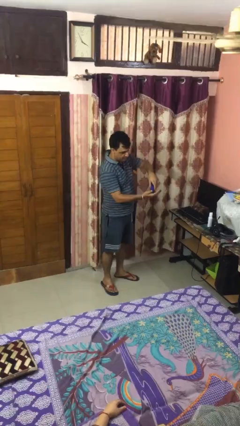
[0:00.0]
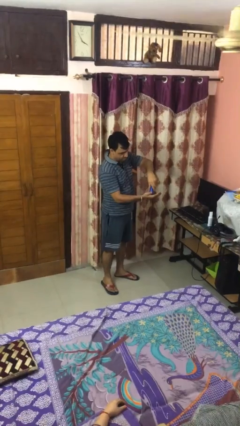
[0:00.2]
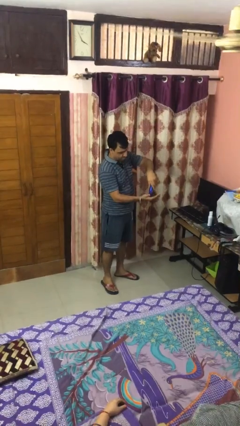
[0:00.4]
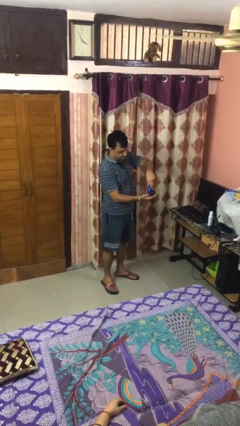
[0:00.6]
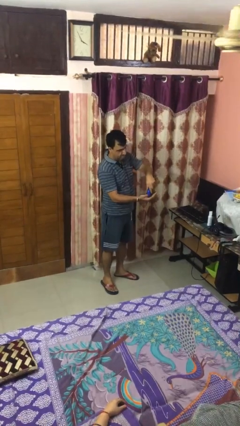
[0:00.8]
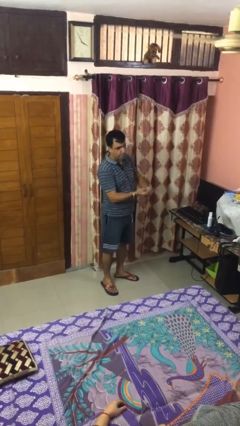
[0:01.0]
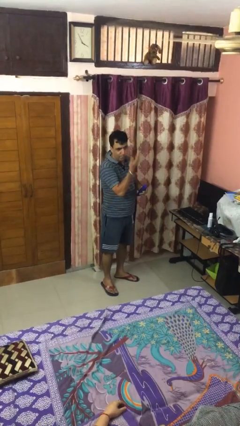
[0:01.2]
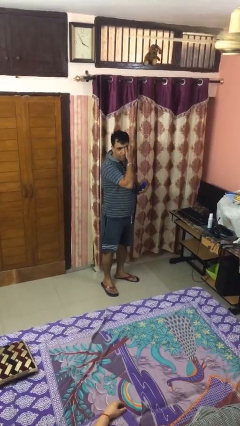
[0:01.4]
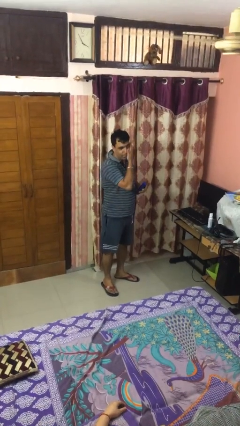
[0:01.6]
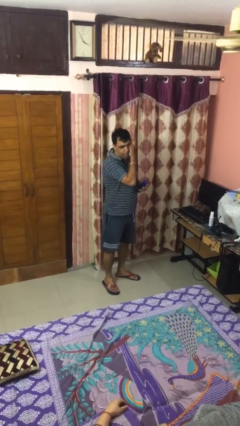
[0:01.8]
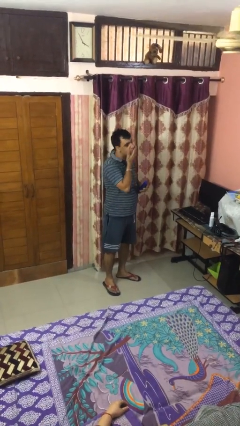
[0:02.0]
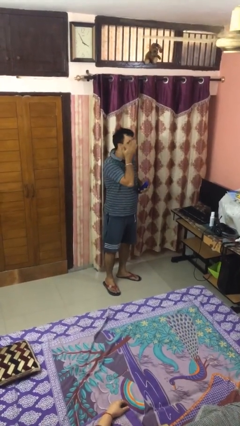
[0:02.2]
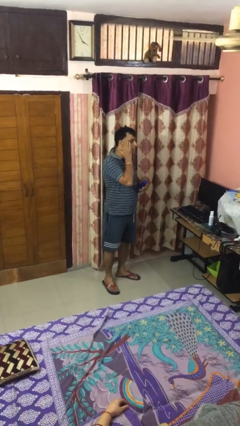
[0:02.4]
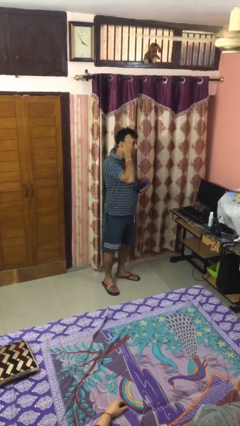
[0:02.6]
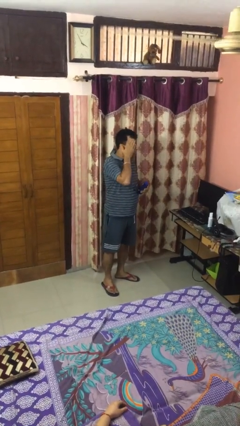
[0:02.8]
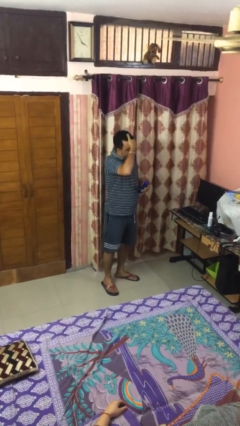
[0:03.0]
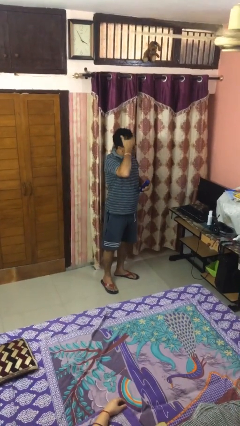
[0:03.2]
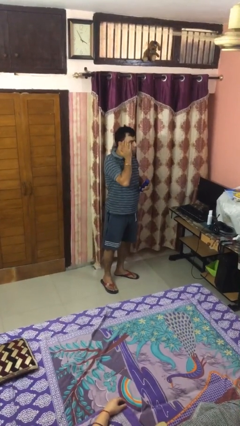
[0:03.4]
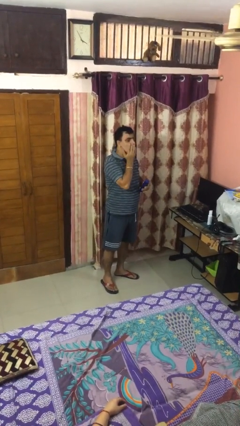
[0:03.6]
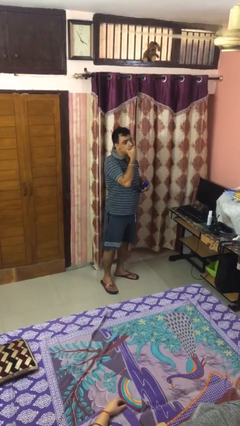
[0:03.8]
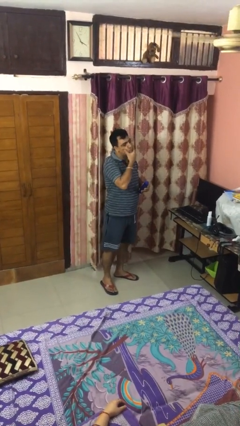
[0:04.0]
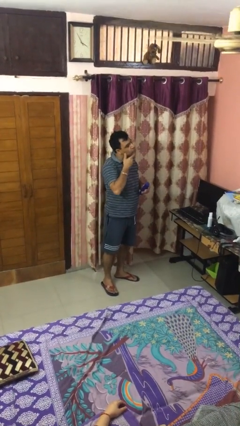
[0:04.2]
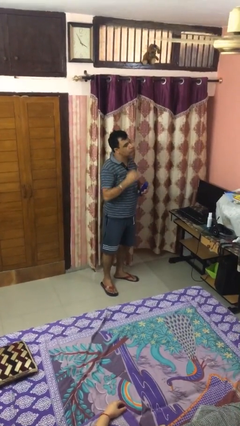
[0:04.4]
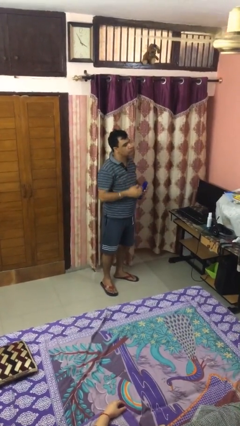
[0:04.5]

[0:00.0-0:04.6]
person applies facial moisturizer

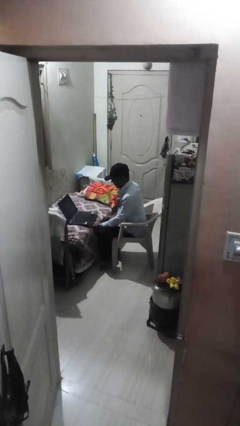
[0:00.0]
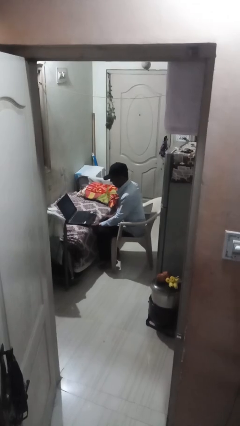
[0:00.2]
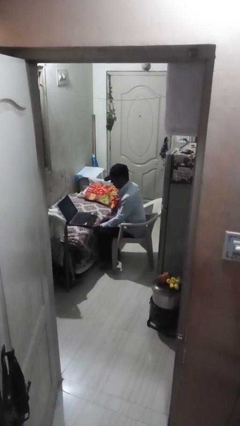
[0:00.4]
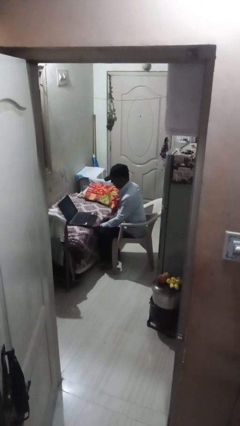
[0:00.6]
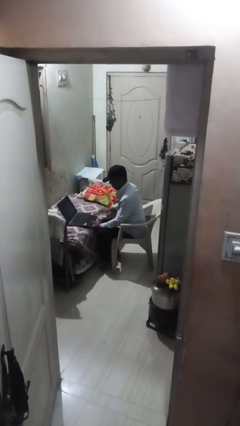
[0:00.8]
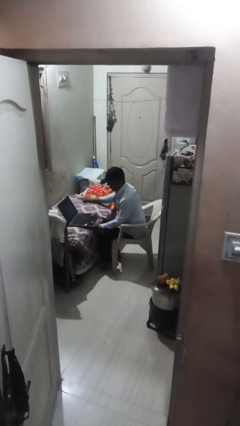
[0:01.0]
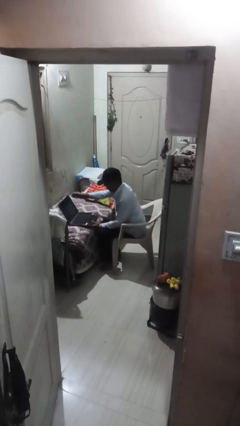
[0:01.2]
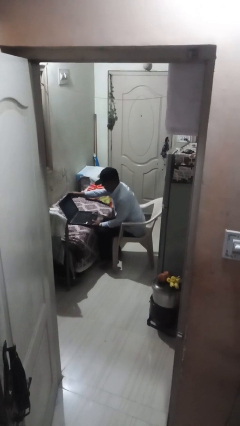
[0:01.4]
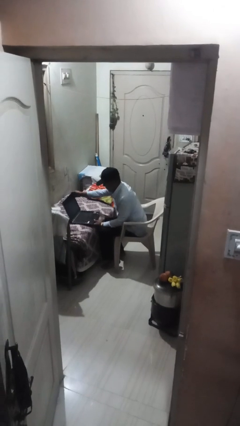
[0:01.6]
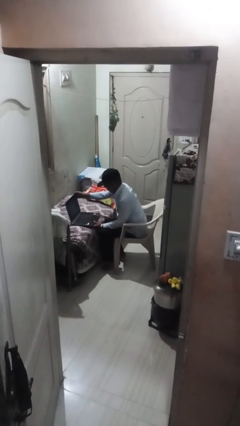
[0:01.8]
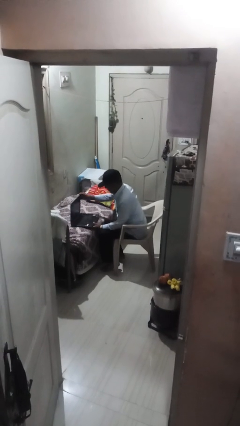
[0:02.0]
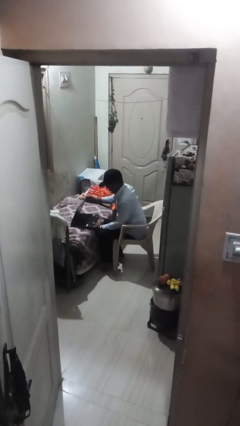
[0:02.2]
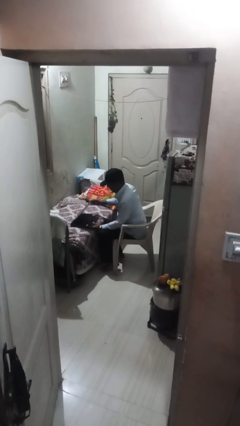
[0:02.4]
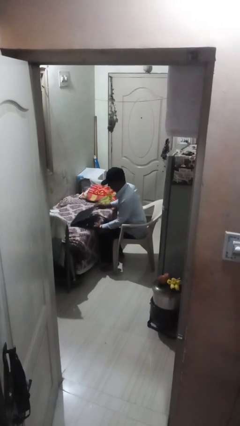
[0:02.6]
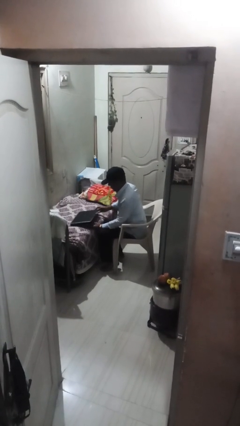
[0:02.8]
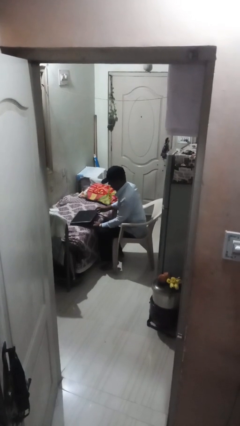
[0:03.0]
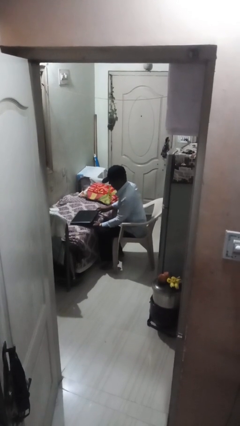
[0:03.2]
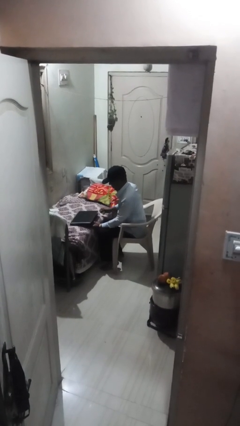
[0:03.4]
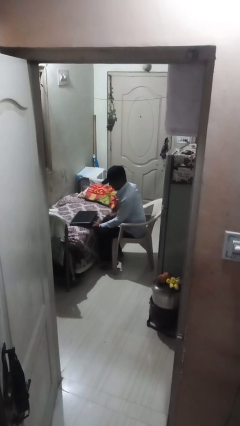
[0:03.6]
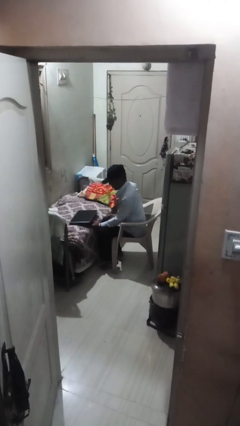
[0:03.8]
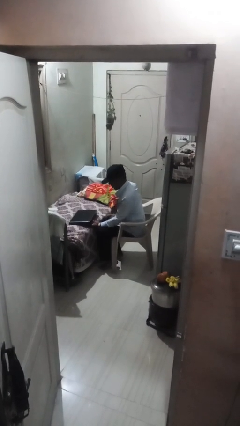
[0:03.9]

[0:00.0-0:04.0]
person closes laptop

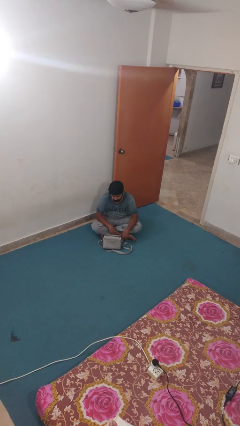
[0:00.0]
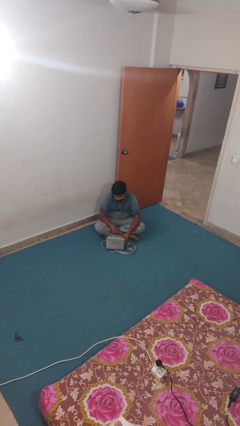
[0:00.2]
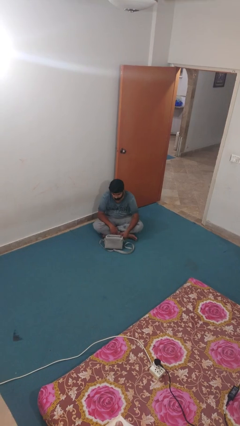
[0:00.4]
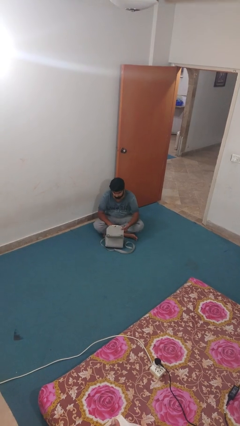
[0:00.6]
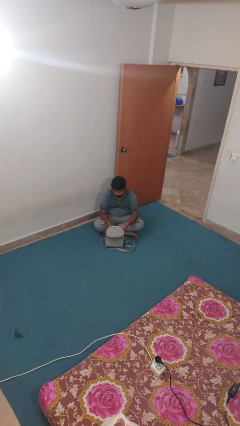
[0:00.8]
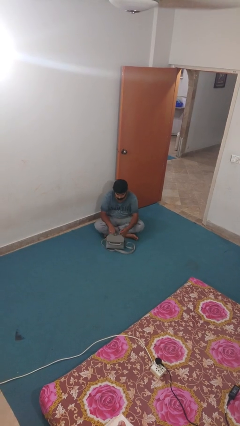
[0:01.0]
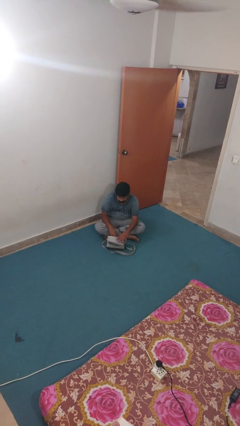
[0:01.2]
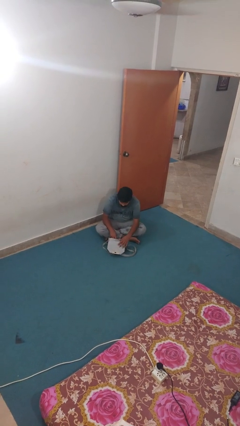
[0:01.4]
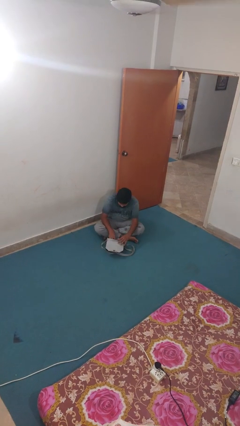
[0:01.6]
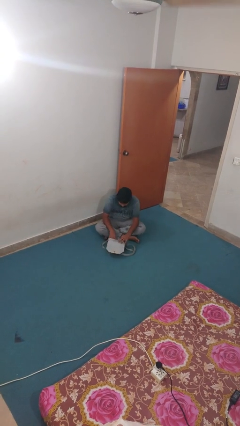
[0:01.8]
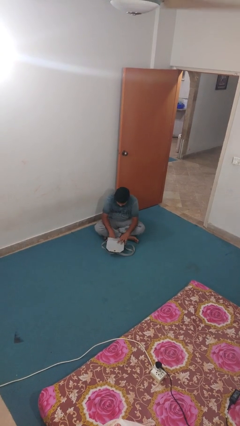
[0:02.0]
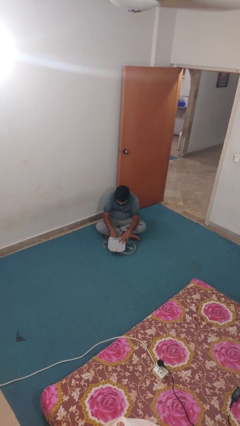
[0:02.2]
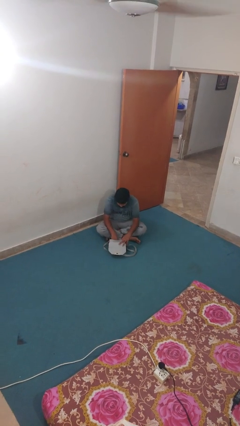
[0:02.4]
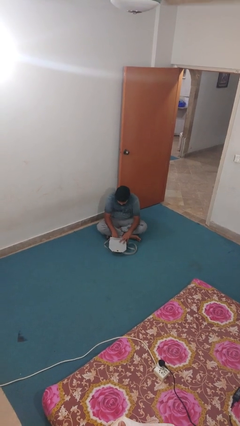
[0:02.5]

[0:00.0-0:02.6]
person searches in purse

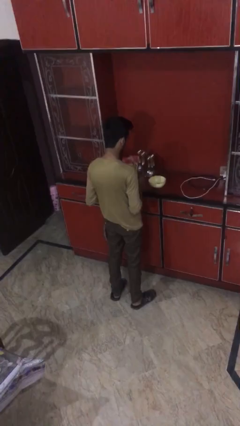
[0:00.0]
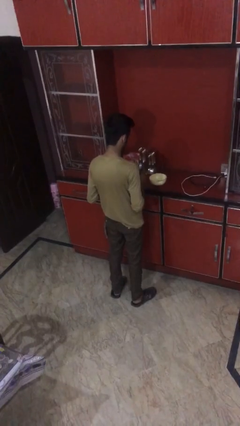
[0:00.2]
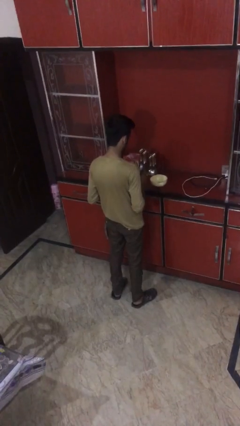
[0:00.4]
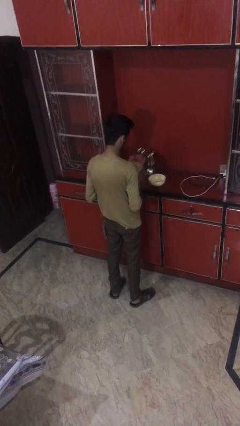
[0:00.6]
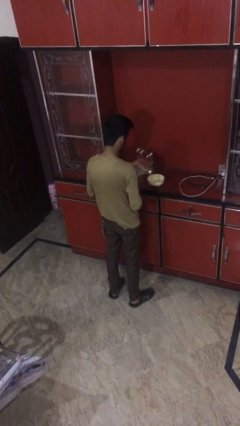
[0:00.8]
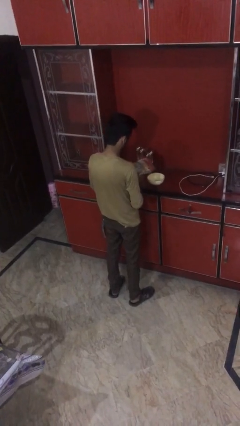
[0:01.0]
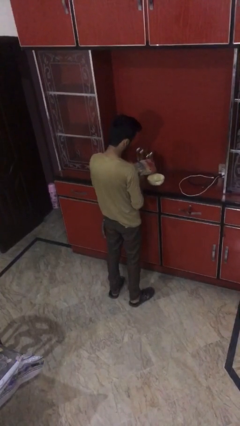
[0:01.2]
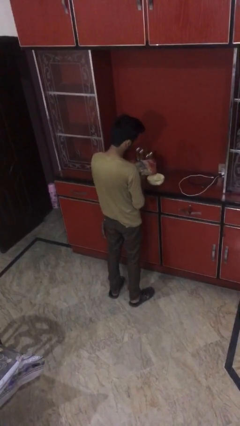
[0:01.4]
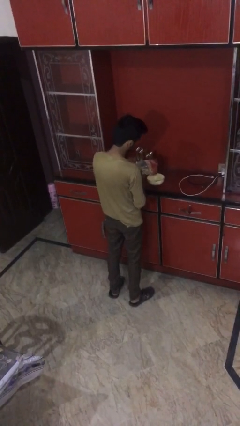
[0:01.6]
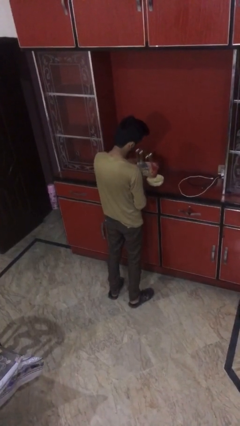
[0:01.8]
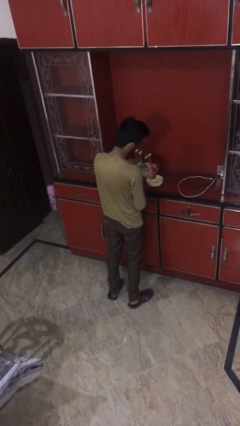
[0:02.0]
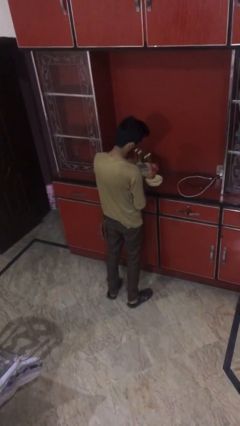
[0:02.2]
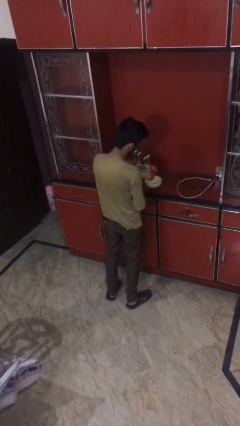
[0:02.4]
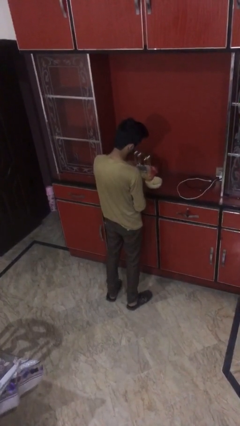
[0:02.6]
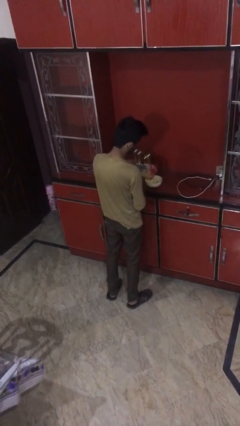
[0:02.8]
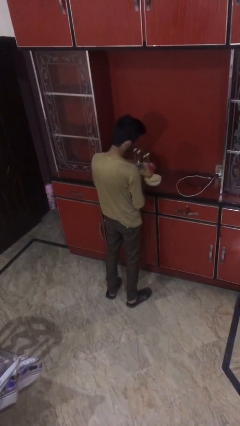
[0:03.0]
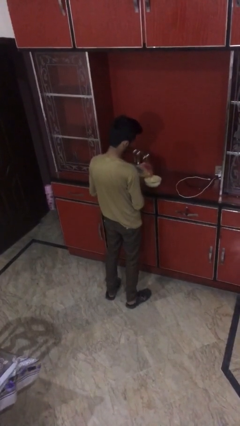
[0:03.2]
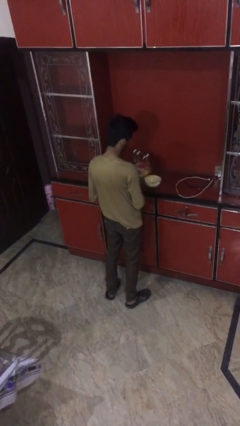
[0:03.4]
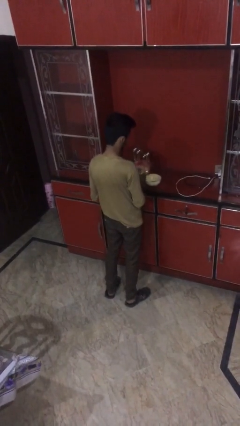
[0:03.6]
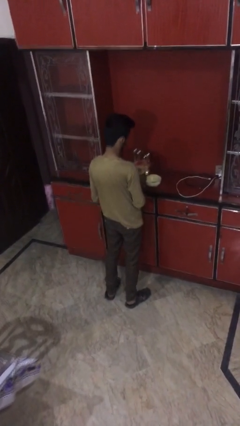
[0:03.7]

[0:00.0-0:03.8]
person pours into bowl

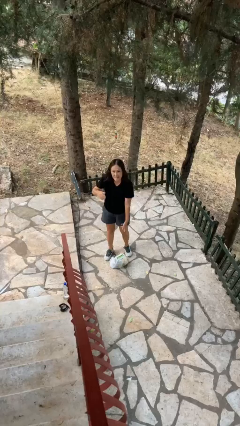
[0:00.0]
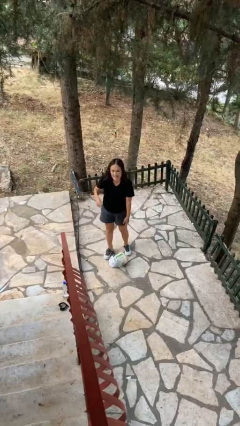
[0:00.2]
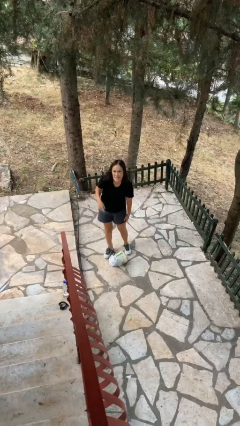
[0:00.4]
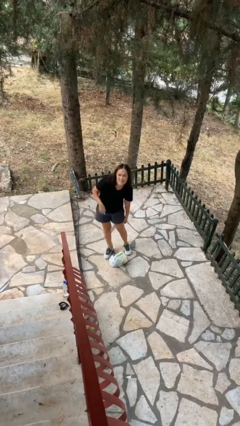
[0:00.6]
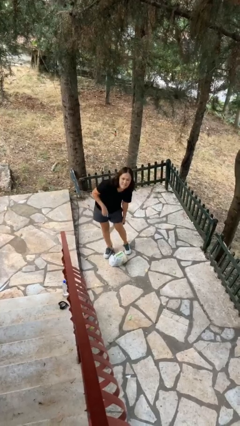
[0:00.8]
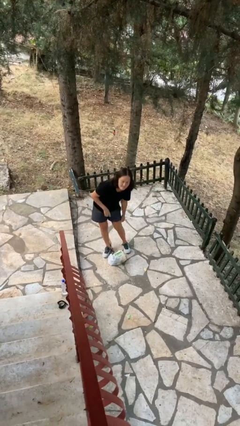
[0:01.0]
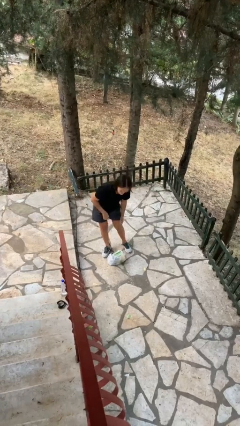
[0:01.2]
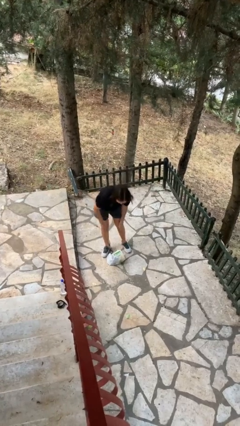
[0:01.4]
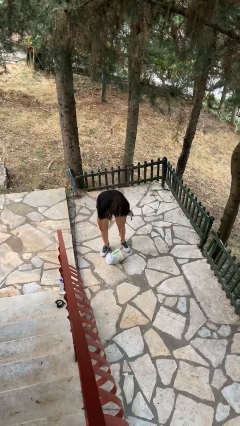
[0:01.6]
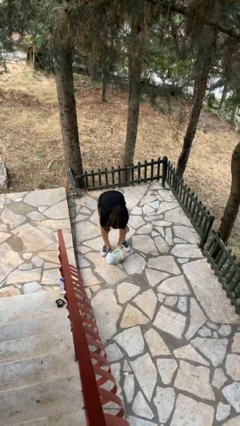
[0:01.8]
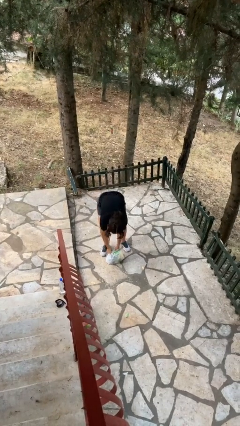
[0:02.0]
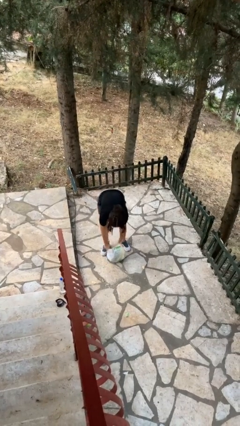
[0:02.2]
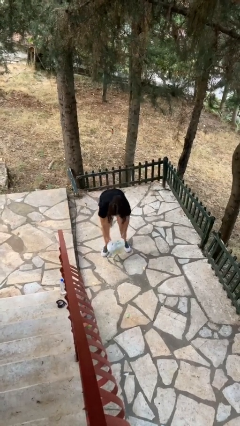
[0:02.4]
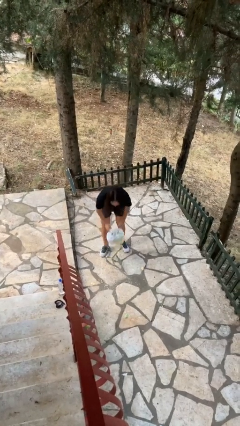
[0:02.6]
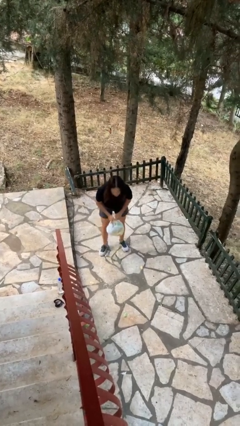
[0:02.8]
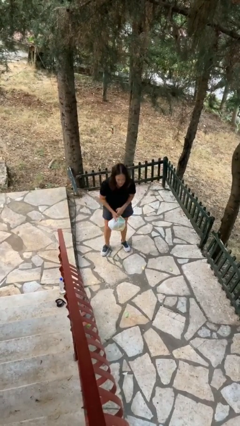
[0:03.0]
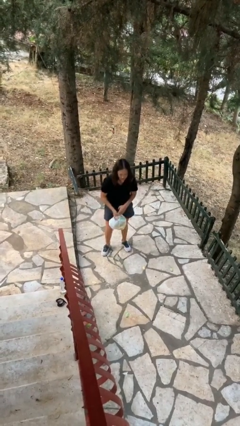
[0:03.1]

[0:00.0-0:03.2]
person picks up object from floor
